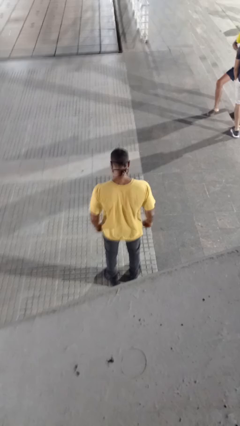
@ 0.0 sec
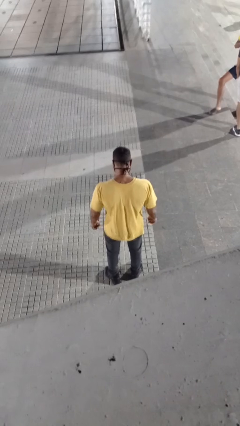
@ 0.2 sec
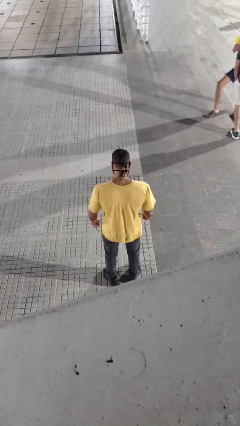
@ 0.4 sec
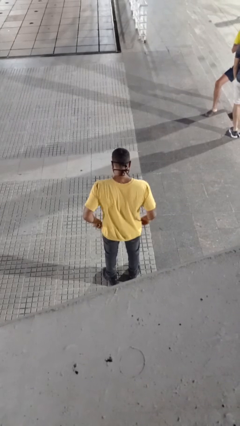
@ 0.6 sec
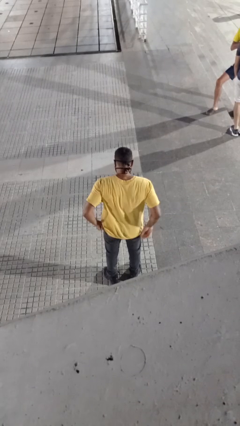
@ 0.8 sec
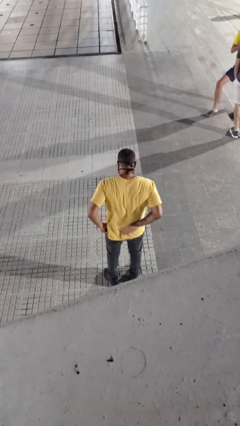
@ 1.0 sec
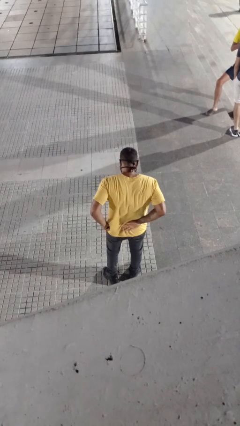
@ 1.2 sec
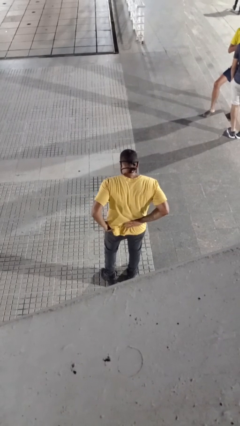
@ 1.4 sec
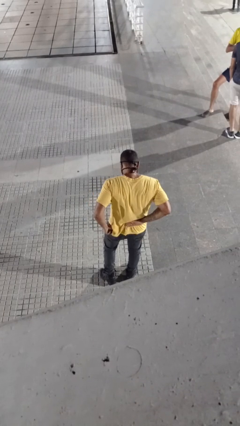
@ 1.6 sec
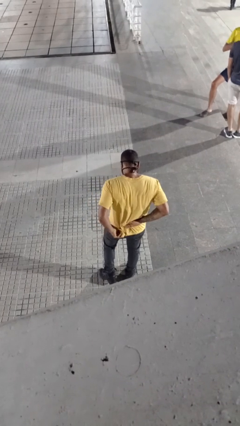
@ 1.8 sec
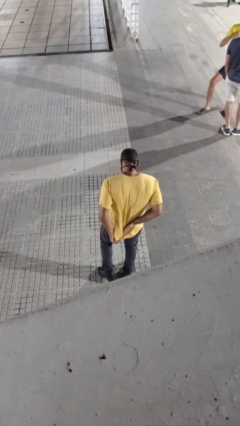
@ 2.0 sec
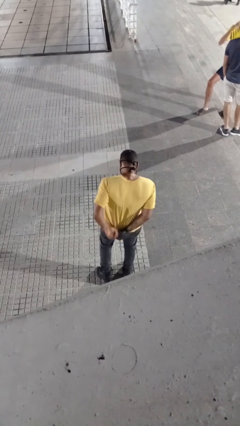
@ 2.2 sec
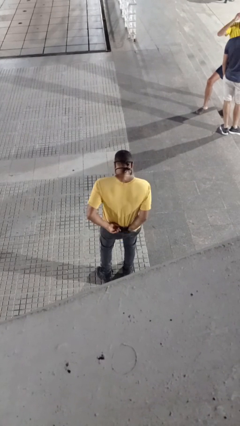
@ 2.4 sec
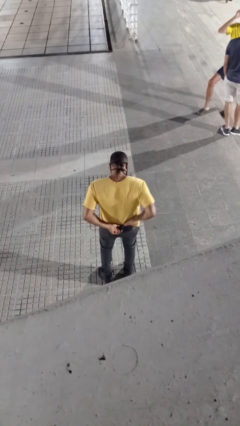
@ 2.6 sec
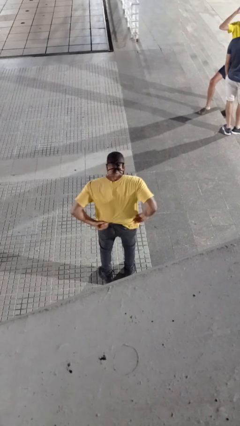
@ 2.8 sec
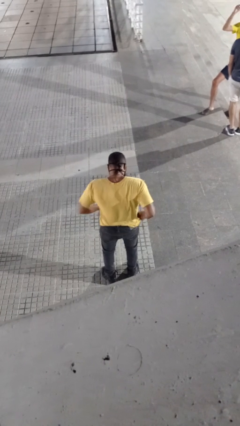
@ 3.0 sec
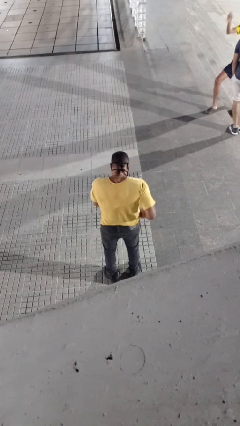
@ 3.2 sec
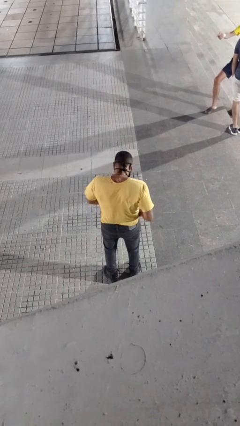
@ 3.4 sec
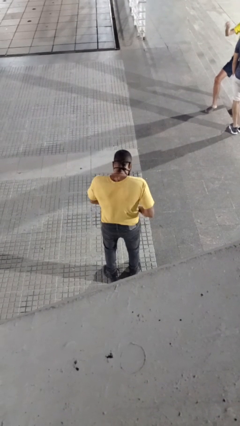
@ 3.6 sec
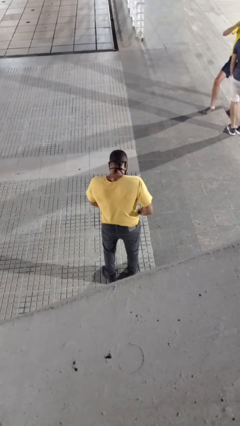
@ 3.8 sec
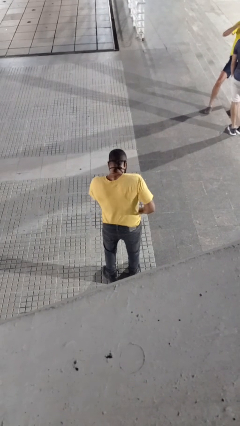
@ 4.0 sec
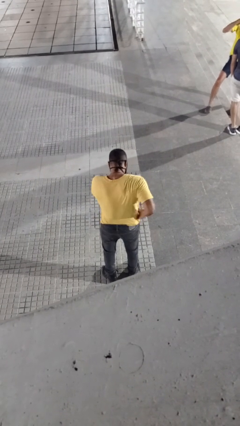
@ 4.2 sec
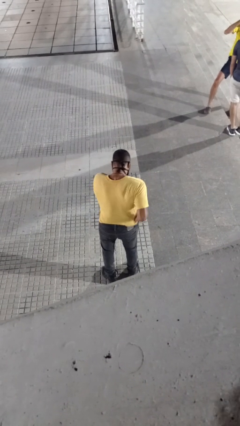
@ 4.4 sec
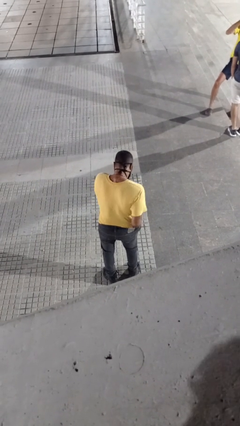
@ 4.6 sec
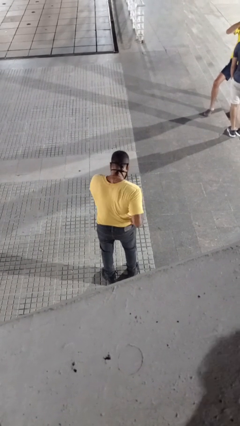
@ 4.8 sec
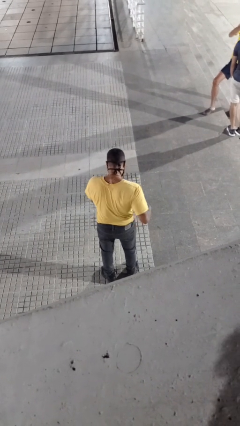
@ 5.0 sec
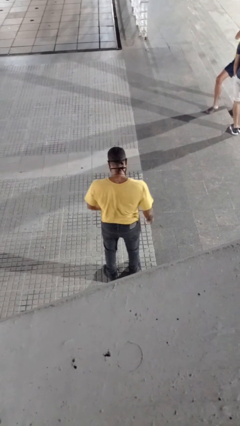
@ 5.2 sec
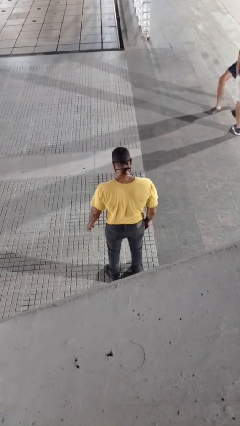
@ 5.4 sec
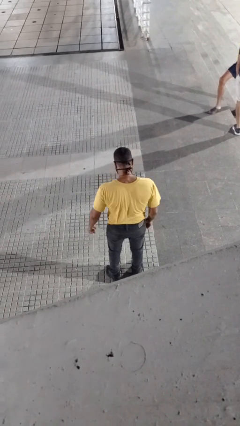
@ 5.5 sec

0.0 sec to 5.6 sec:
person tucks in shirt

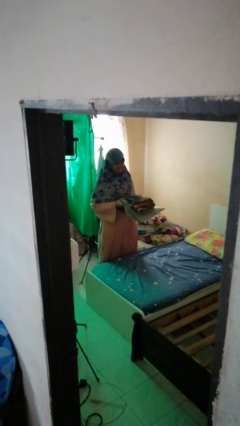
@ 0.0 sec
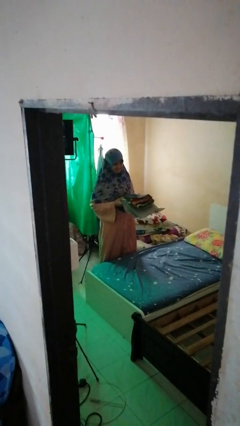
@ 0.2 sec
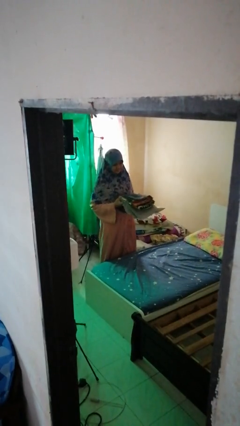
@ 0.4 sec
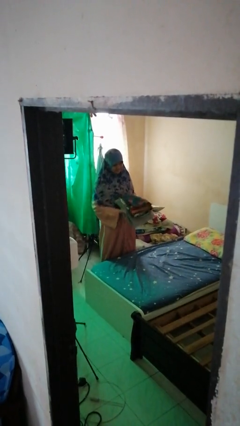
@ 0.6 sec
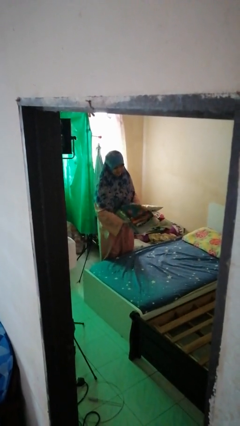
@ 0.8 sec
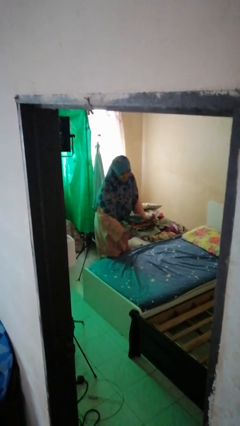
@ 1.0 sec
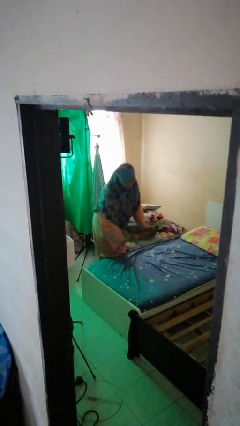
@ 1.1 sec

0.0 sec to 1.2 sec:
person puts down object on bed

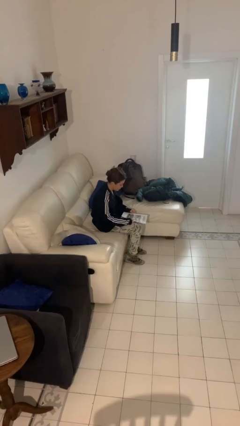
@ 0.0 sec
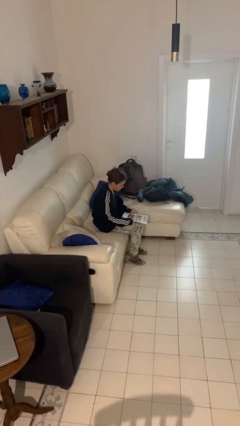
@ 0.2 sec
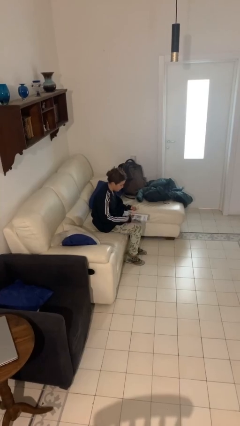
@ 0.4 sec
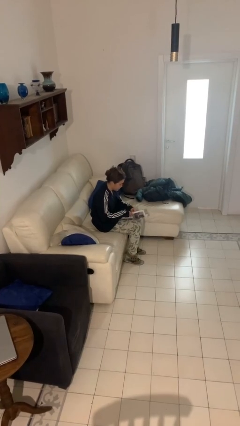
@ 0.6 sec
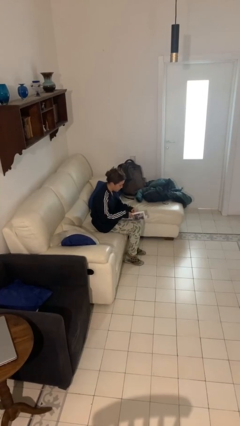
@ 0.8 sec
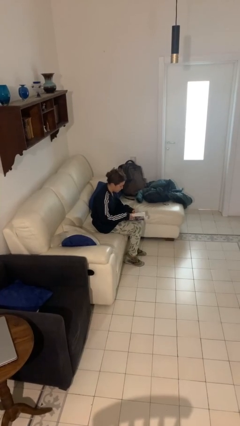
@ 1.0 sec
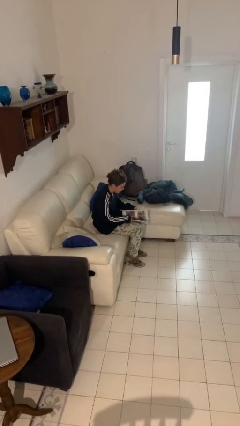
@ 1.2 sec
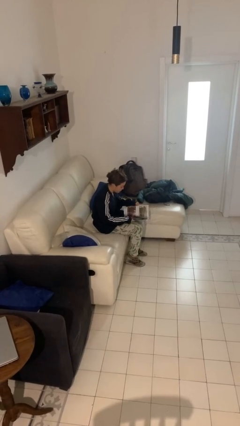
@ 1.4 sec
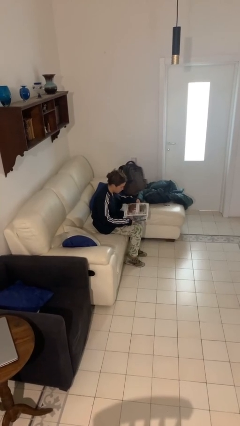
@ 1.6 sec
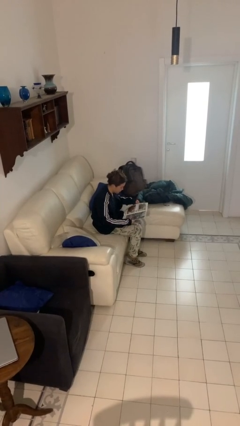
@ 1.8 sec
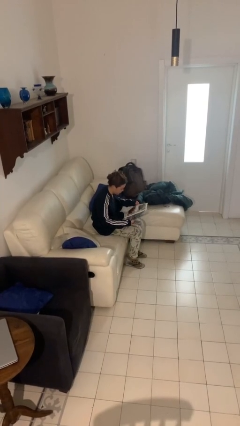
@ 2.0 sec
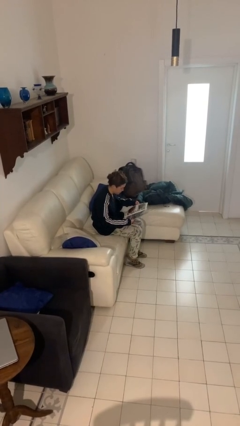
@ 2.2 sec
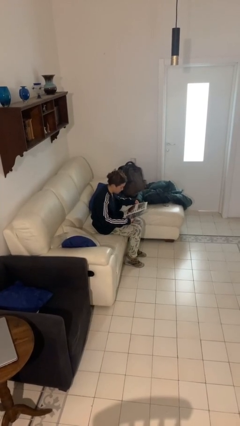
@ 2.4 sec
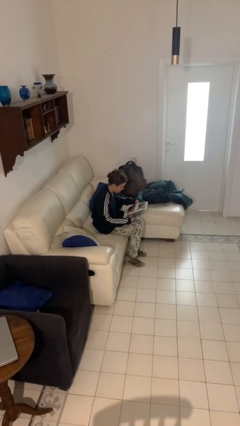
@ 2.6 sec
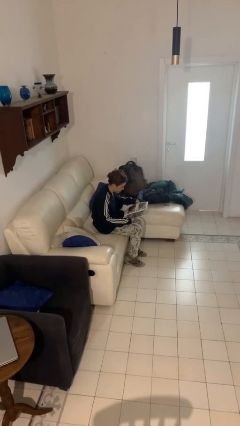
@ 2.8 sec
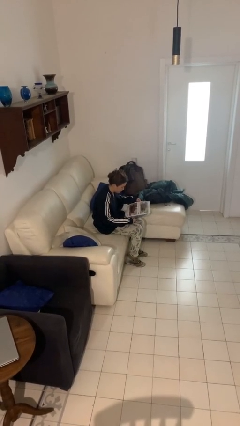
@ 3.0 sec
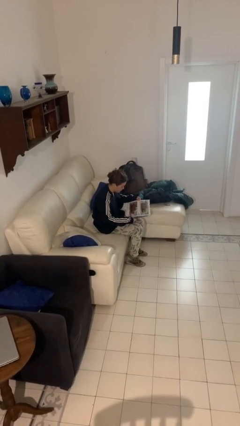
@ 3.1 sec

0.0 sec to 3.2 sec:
person reads magazine

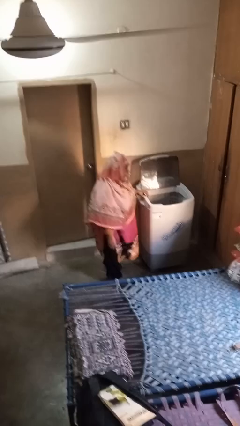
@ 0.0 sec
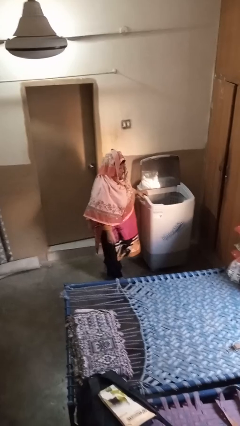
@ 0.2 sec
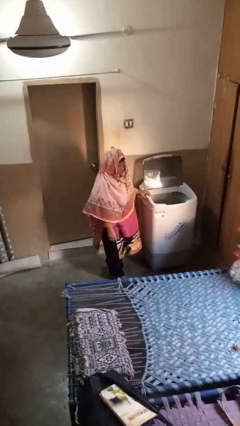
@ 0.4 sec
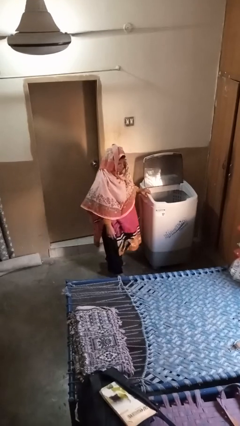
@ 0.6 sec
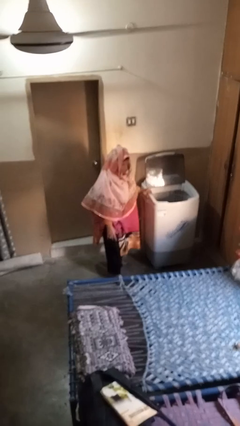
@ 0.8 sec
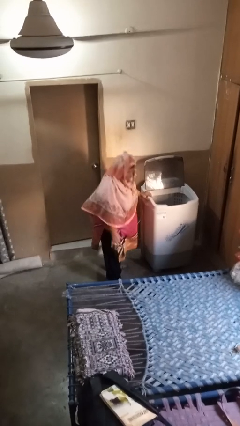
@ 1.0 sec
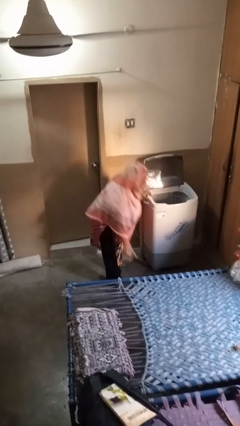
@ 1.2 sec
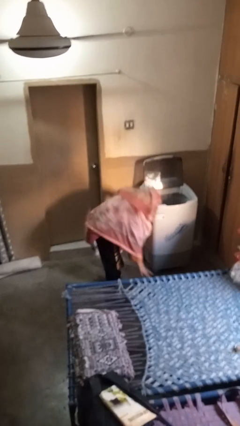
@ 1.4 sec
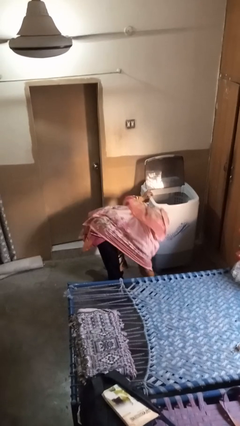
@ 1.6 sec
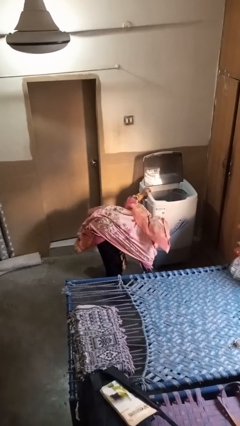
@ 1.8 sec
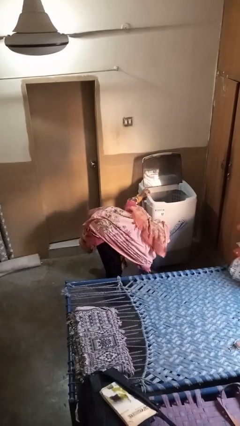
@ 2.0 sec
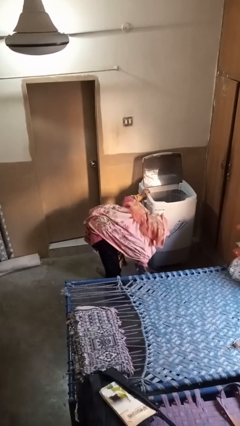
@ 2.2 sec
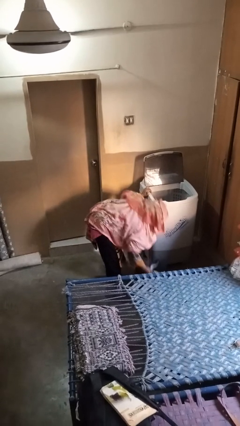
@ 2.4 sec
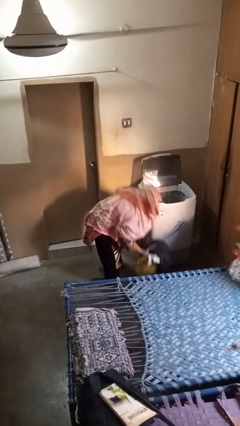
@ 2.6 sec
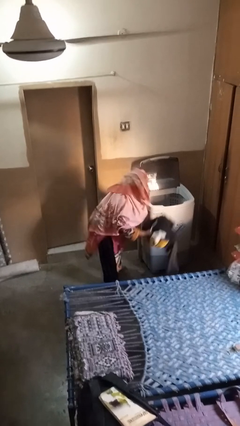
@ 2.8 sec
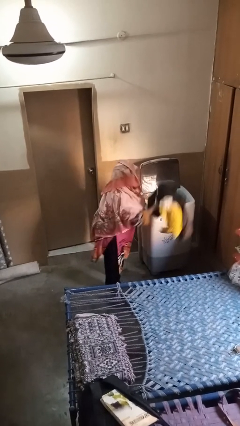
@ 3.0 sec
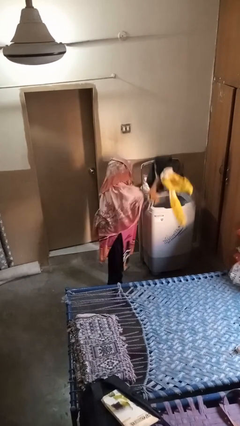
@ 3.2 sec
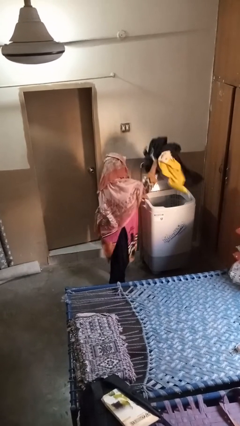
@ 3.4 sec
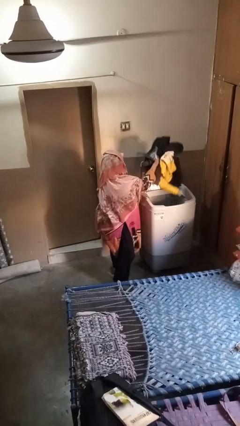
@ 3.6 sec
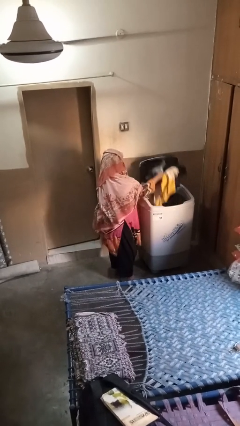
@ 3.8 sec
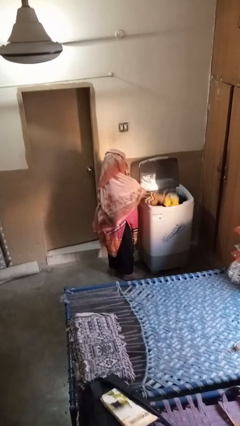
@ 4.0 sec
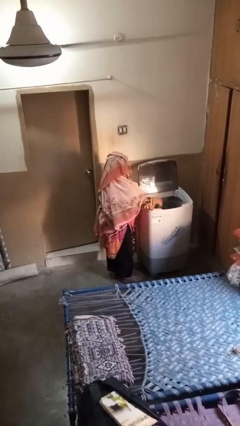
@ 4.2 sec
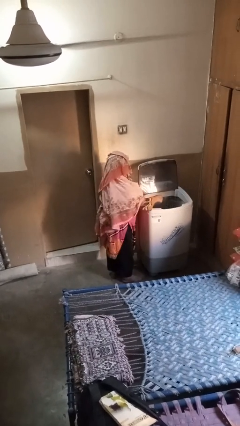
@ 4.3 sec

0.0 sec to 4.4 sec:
person loads clotheswasher

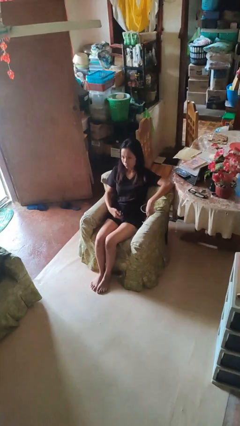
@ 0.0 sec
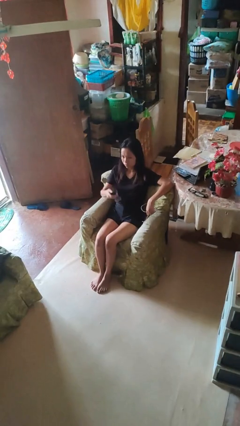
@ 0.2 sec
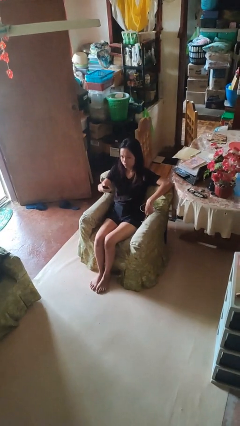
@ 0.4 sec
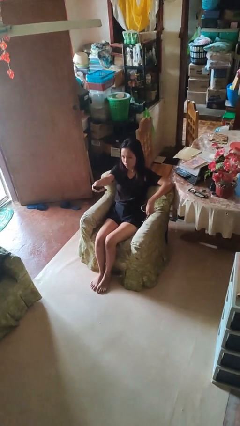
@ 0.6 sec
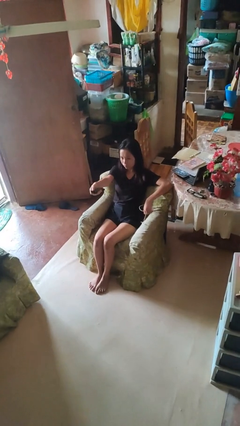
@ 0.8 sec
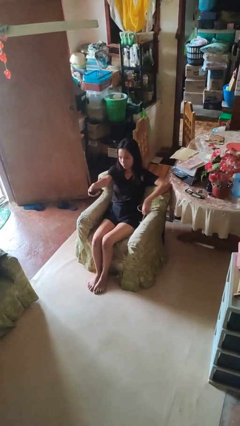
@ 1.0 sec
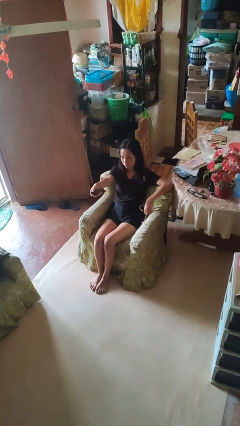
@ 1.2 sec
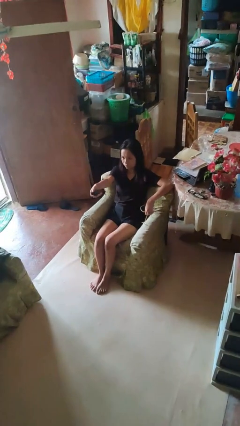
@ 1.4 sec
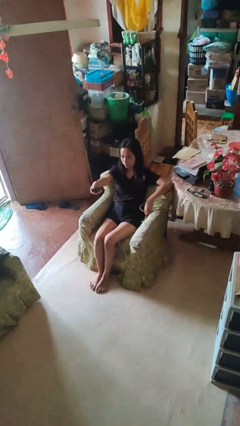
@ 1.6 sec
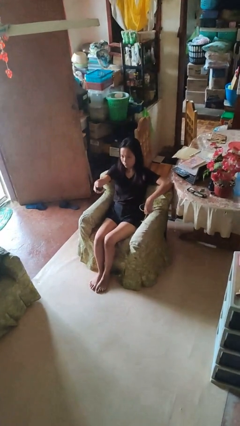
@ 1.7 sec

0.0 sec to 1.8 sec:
person uses television remote

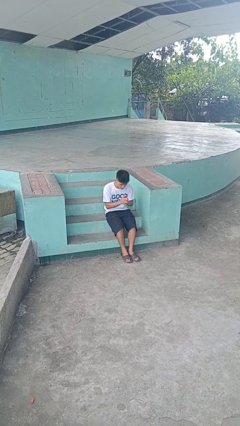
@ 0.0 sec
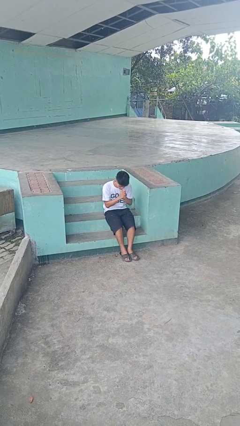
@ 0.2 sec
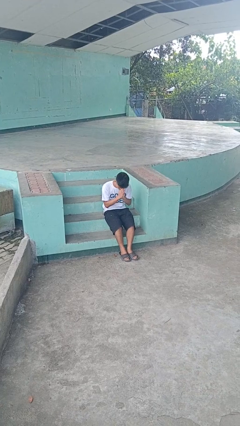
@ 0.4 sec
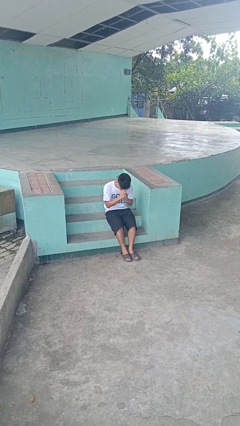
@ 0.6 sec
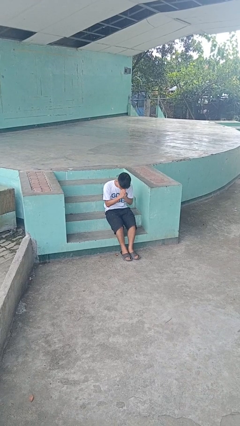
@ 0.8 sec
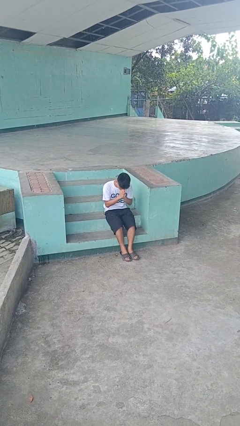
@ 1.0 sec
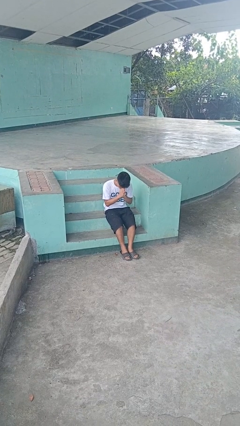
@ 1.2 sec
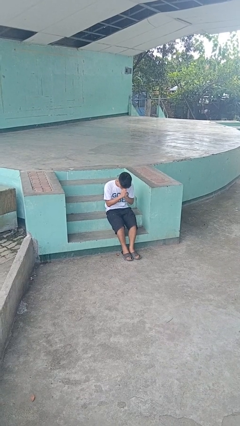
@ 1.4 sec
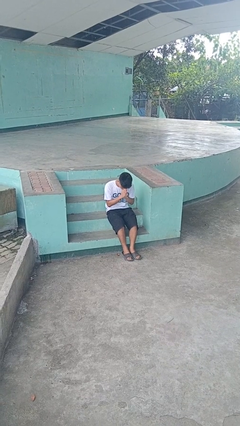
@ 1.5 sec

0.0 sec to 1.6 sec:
person prays
